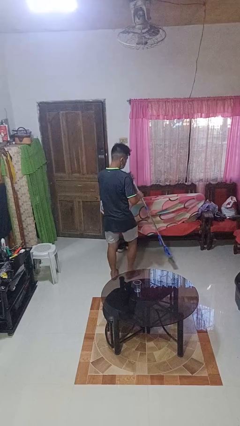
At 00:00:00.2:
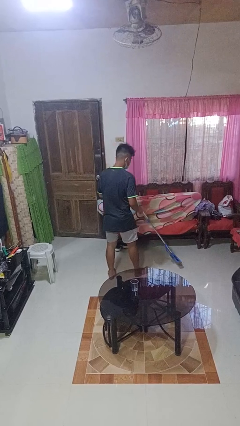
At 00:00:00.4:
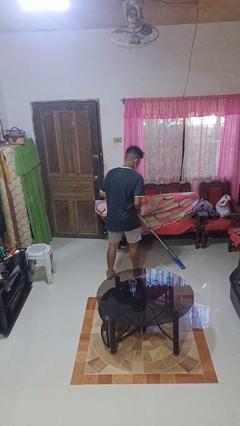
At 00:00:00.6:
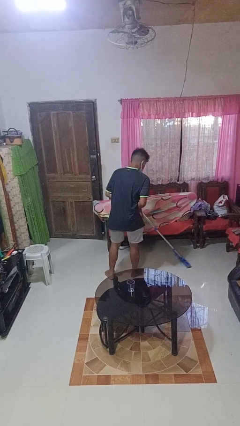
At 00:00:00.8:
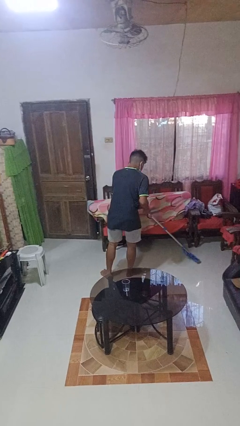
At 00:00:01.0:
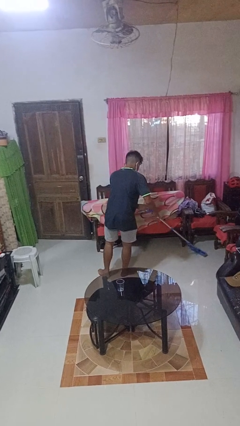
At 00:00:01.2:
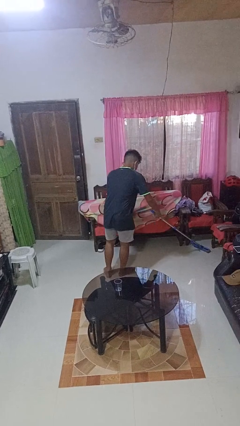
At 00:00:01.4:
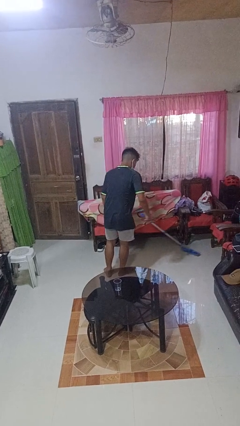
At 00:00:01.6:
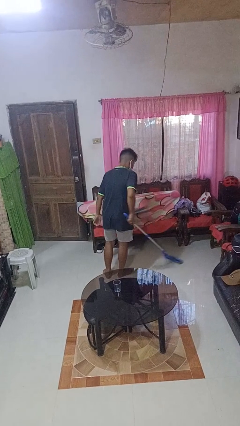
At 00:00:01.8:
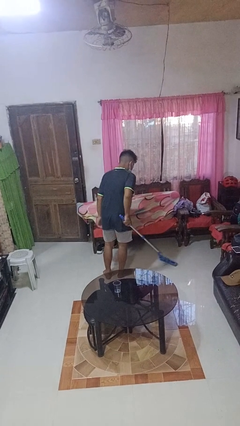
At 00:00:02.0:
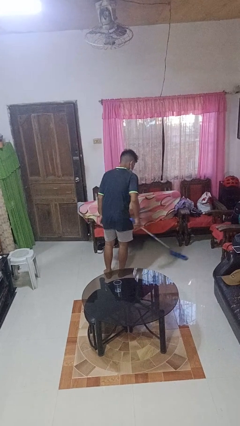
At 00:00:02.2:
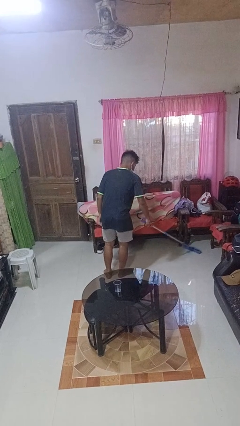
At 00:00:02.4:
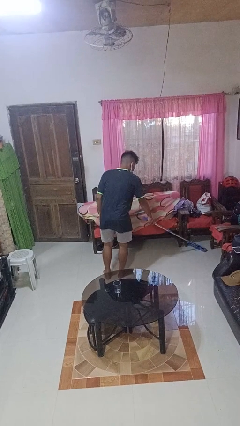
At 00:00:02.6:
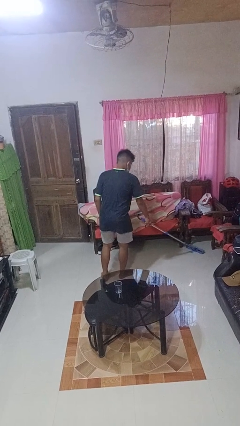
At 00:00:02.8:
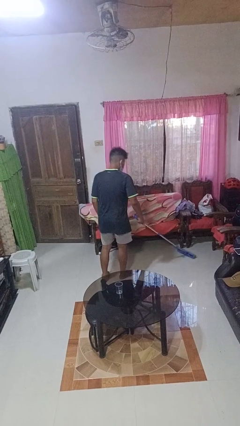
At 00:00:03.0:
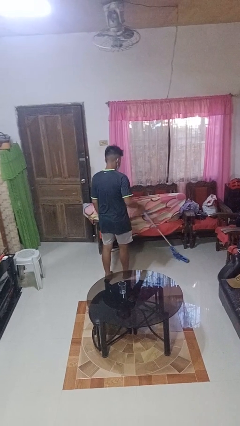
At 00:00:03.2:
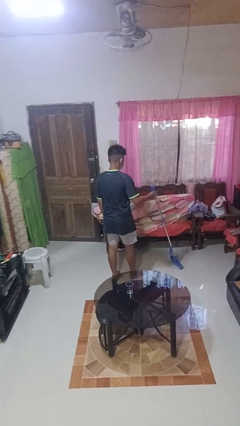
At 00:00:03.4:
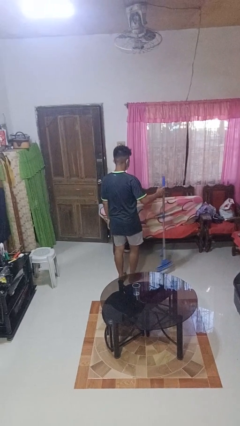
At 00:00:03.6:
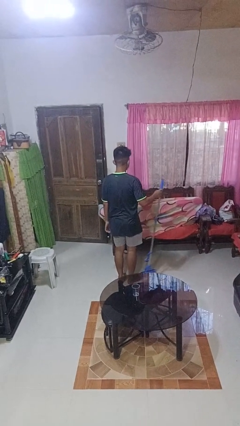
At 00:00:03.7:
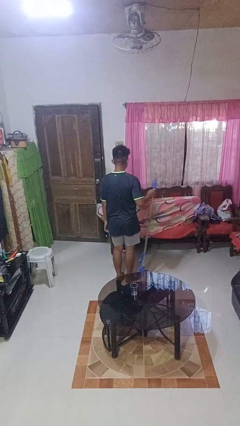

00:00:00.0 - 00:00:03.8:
person mops

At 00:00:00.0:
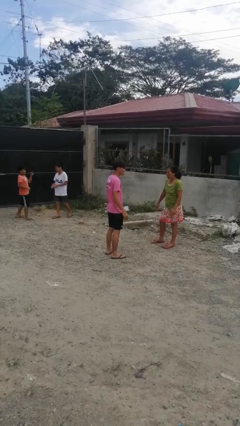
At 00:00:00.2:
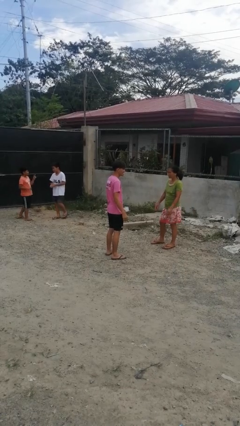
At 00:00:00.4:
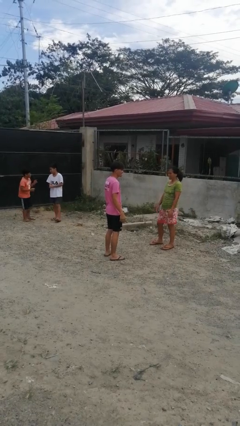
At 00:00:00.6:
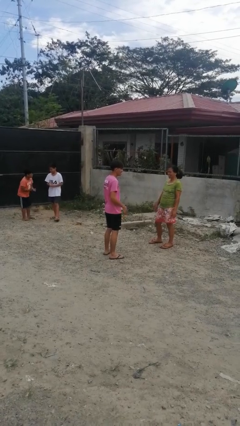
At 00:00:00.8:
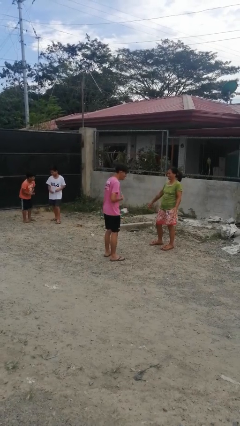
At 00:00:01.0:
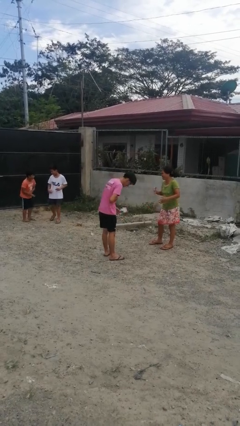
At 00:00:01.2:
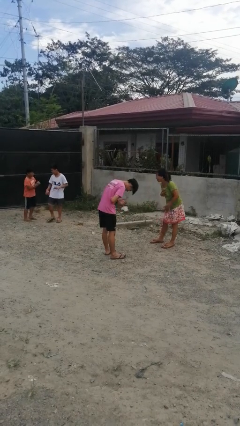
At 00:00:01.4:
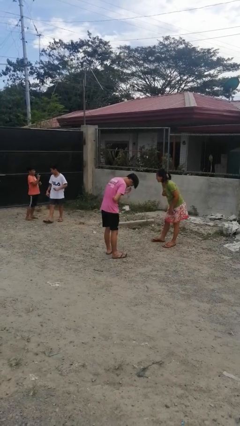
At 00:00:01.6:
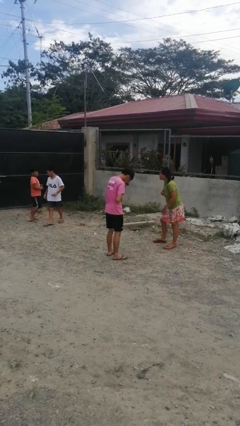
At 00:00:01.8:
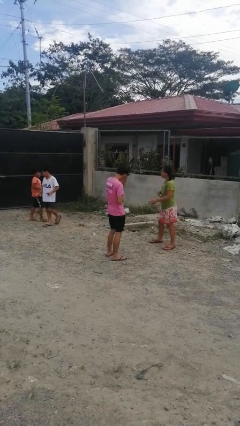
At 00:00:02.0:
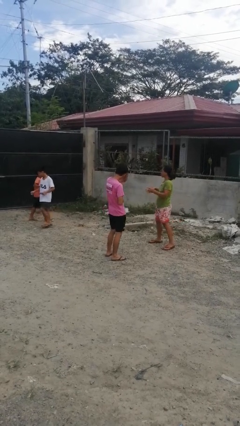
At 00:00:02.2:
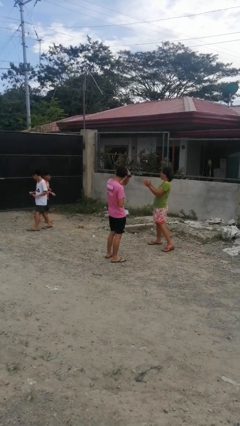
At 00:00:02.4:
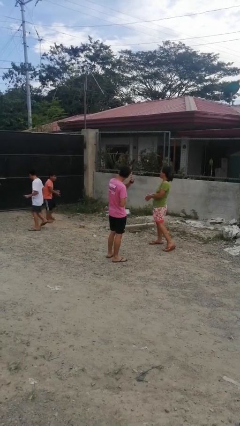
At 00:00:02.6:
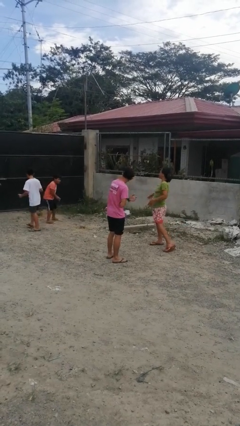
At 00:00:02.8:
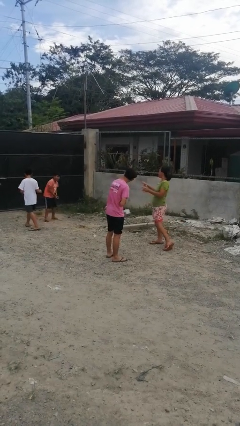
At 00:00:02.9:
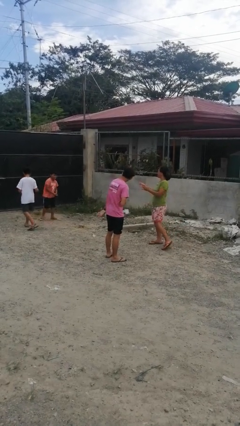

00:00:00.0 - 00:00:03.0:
person laughs with person

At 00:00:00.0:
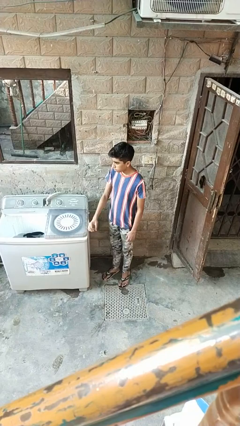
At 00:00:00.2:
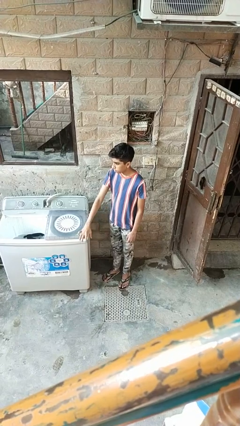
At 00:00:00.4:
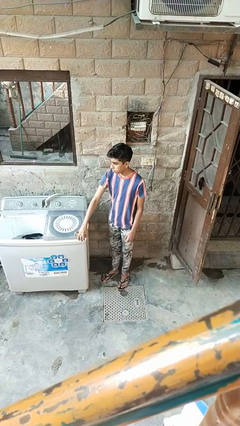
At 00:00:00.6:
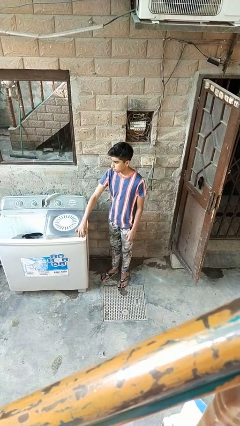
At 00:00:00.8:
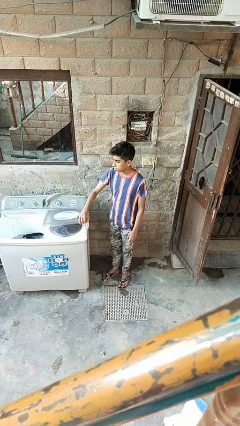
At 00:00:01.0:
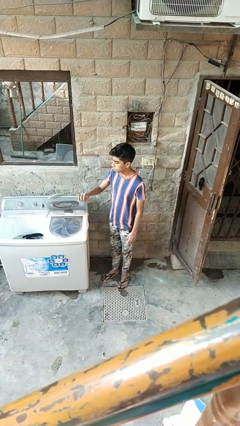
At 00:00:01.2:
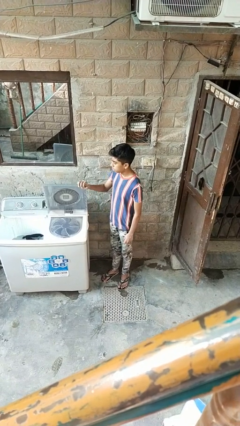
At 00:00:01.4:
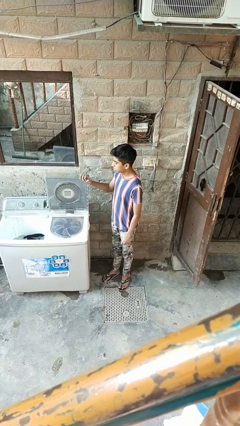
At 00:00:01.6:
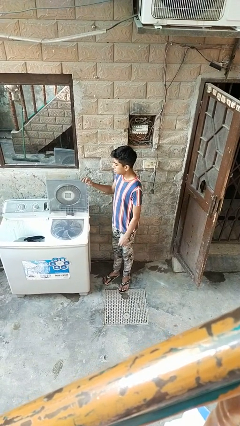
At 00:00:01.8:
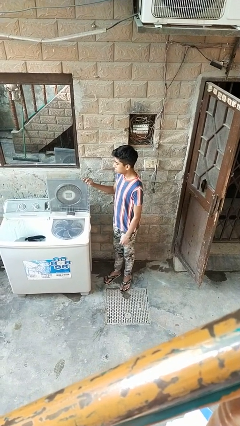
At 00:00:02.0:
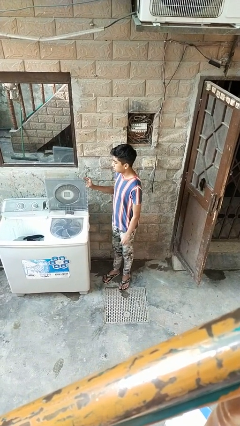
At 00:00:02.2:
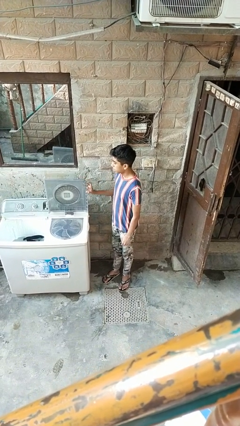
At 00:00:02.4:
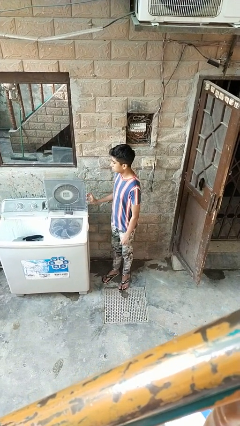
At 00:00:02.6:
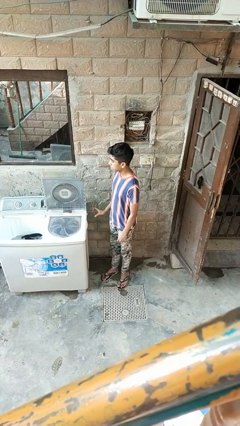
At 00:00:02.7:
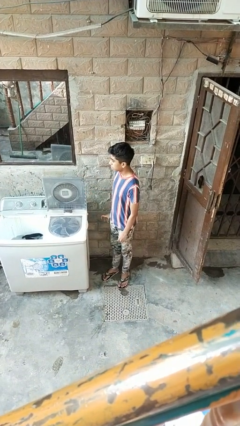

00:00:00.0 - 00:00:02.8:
person opens clothes washer

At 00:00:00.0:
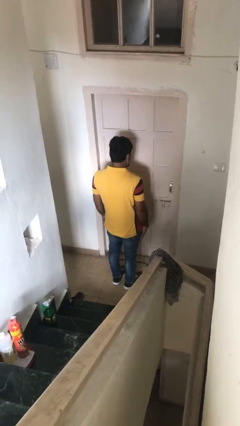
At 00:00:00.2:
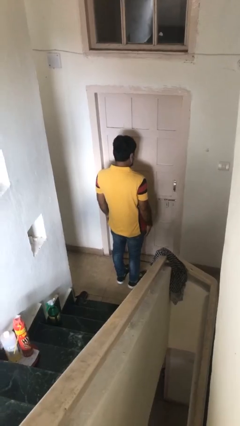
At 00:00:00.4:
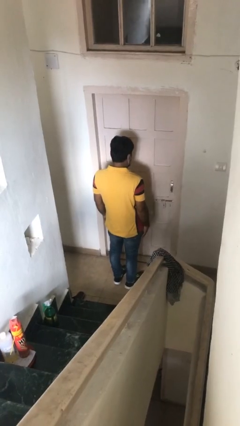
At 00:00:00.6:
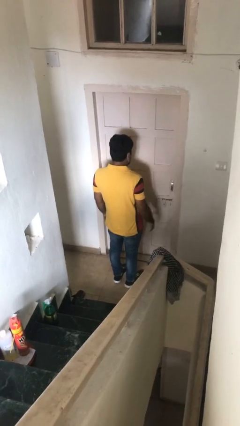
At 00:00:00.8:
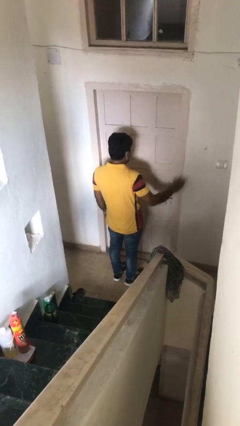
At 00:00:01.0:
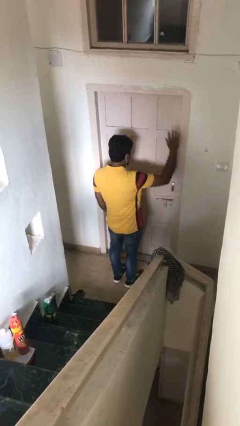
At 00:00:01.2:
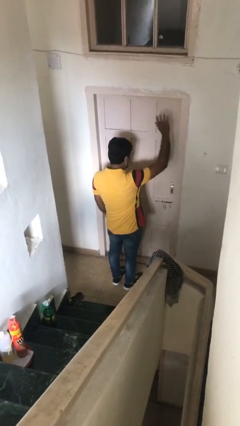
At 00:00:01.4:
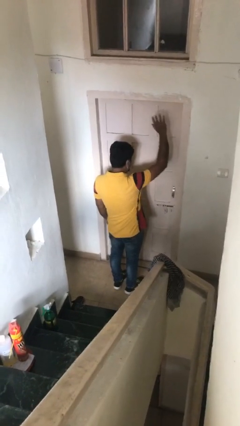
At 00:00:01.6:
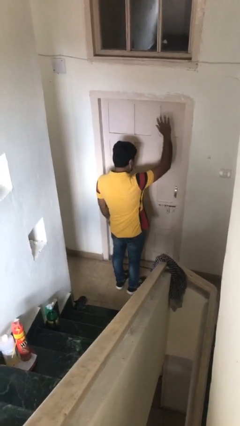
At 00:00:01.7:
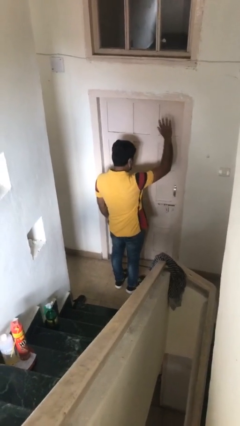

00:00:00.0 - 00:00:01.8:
person gestures raise hand

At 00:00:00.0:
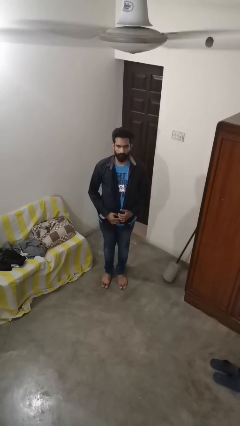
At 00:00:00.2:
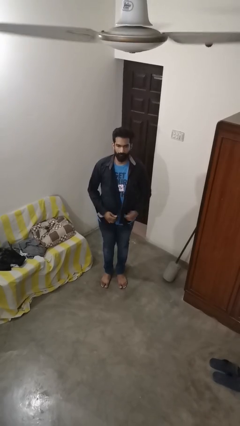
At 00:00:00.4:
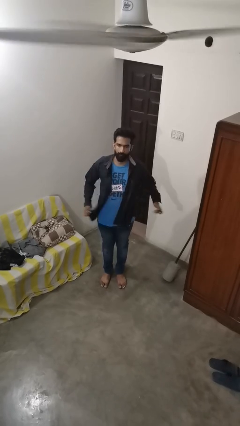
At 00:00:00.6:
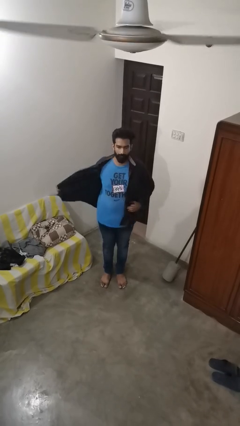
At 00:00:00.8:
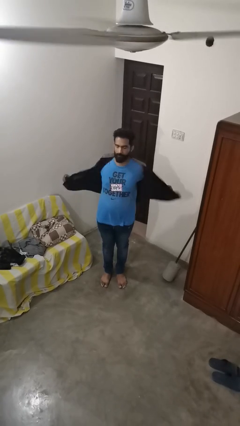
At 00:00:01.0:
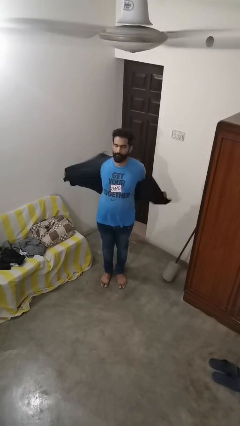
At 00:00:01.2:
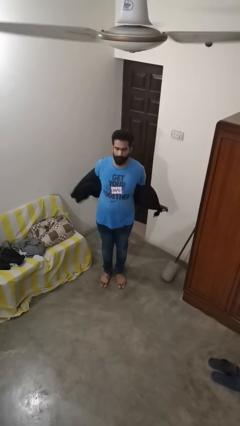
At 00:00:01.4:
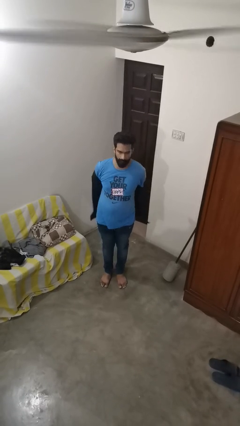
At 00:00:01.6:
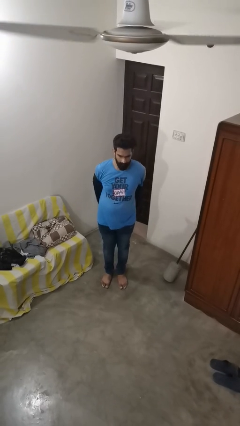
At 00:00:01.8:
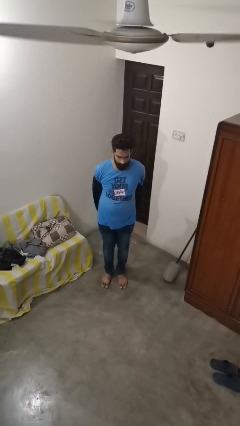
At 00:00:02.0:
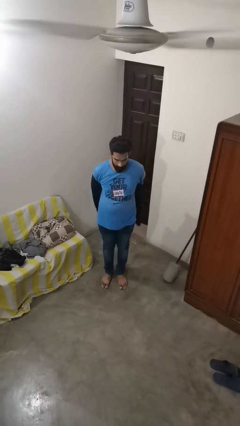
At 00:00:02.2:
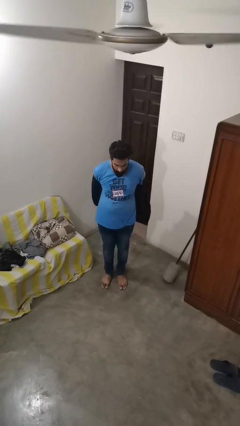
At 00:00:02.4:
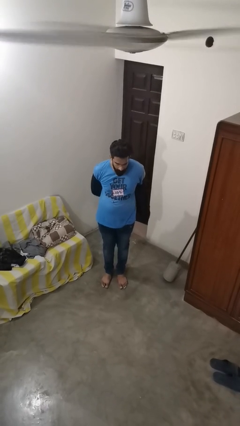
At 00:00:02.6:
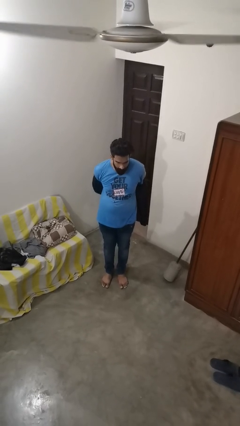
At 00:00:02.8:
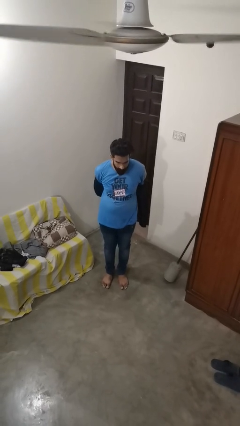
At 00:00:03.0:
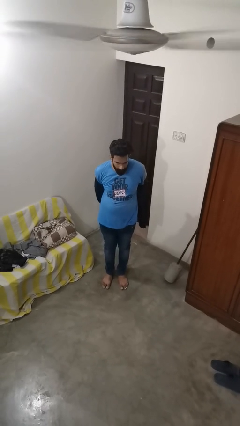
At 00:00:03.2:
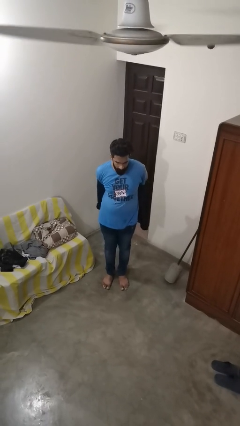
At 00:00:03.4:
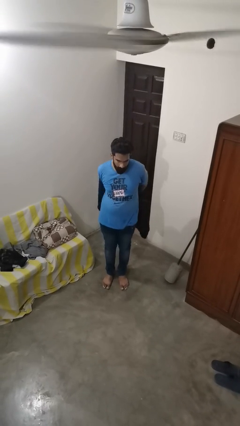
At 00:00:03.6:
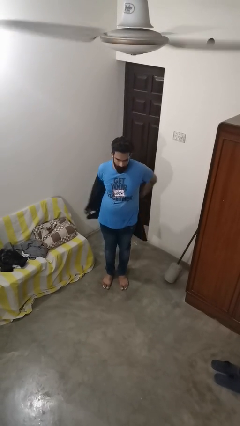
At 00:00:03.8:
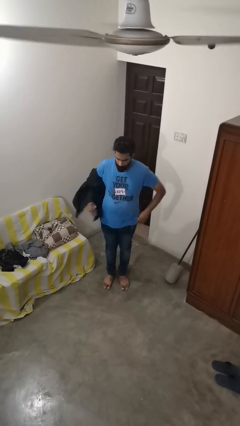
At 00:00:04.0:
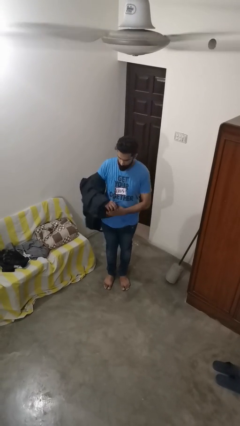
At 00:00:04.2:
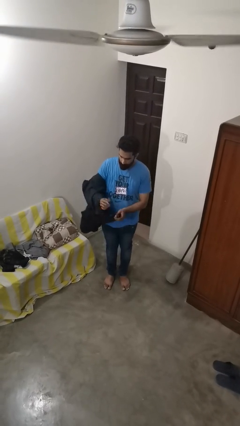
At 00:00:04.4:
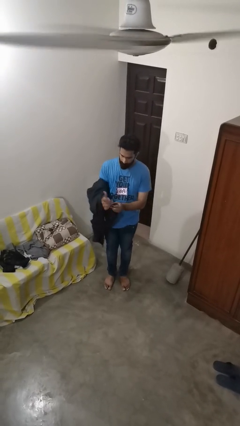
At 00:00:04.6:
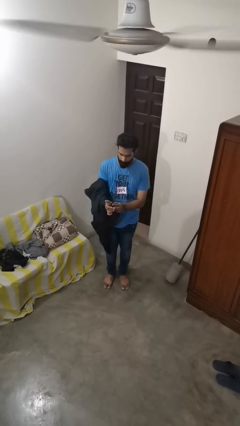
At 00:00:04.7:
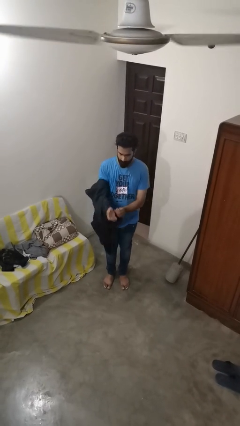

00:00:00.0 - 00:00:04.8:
person takes off shirt

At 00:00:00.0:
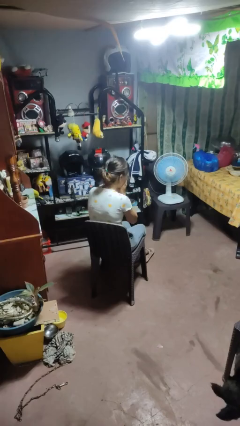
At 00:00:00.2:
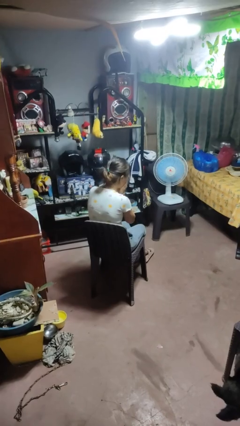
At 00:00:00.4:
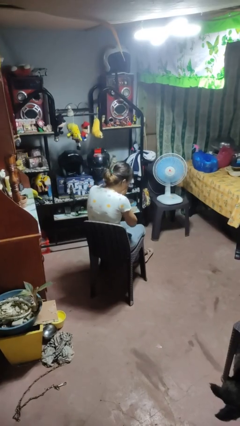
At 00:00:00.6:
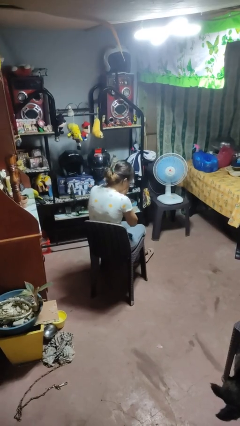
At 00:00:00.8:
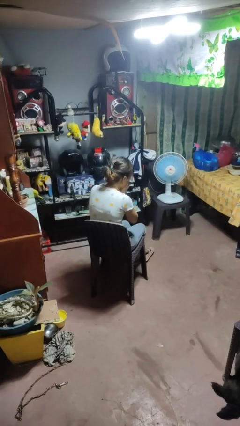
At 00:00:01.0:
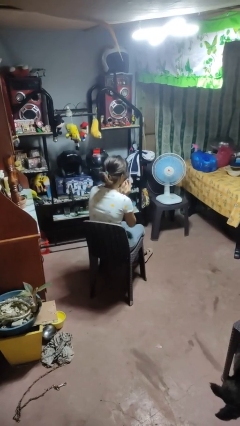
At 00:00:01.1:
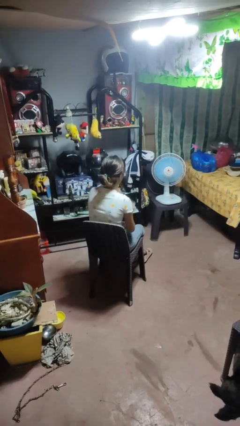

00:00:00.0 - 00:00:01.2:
person sneezes into hand
